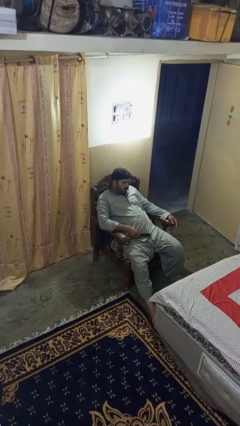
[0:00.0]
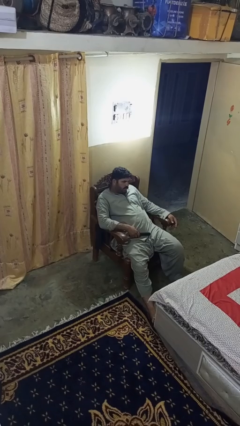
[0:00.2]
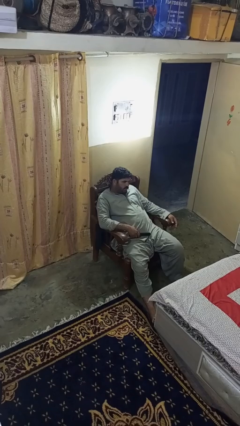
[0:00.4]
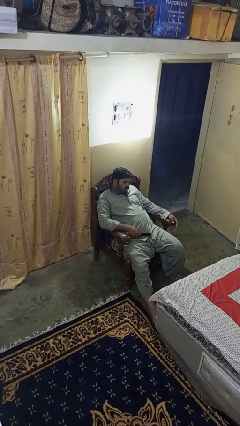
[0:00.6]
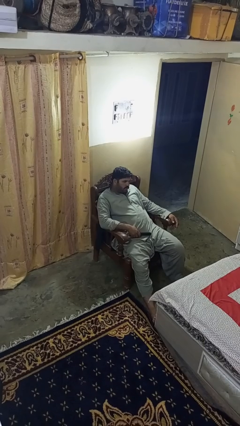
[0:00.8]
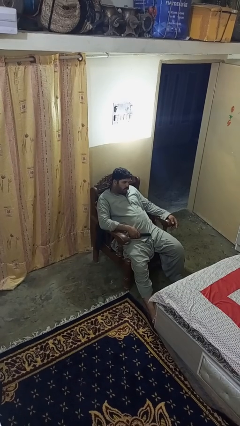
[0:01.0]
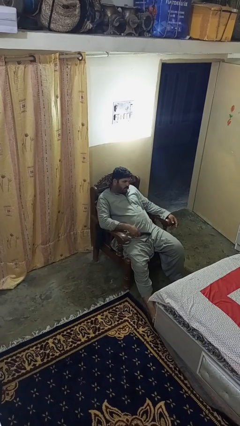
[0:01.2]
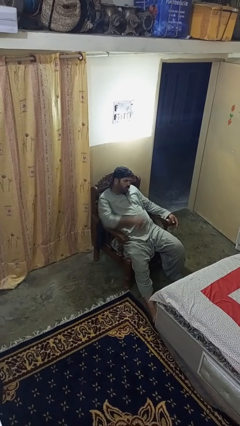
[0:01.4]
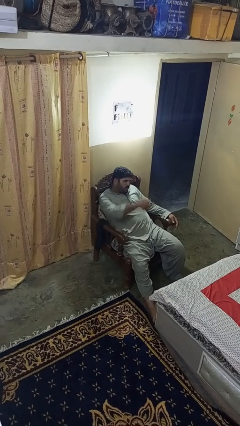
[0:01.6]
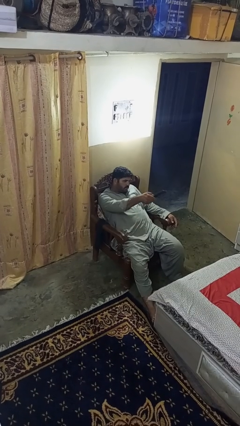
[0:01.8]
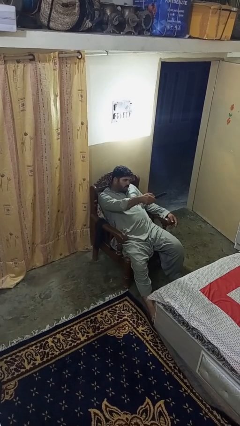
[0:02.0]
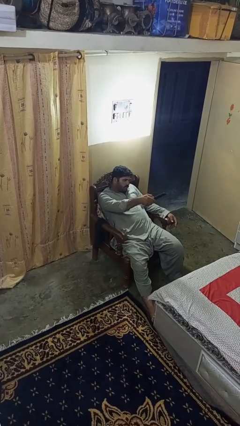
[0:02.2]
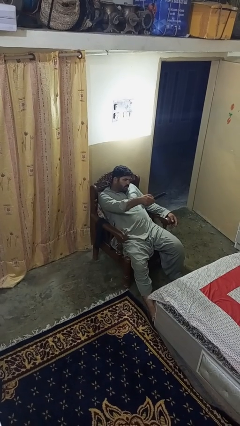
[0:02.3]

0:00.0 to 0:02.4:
person uses television remote

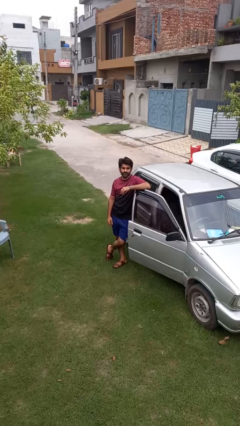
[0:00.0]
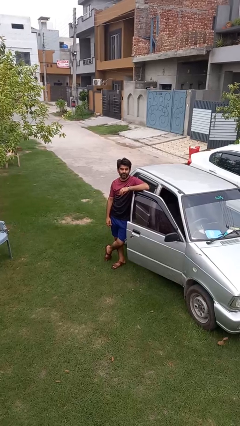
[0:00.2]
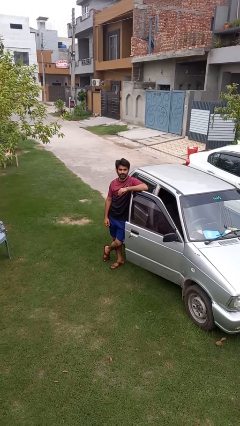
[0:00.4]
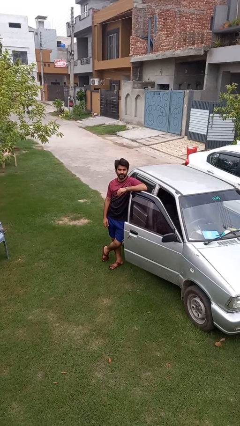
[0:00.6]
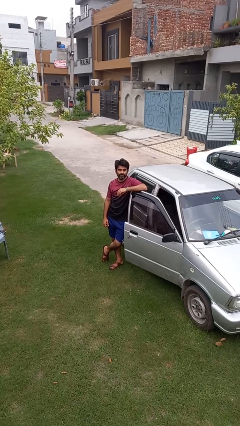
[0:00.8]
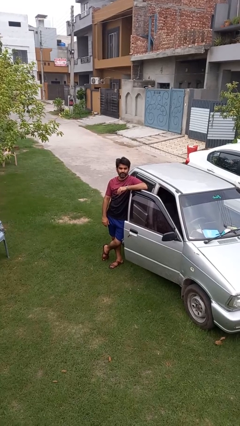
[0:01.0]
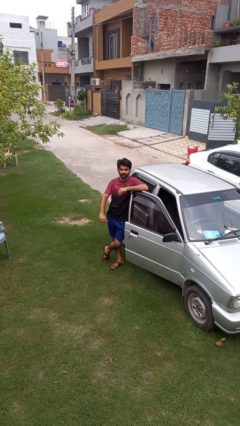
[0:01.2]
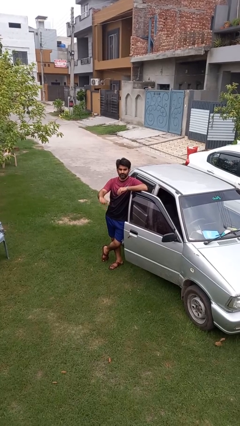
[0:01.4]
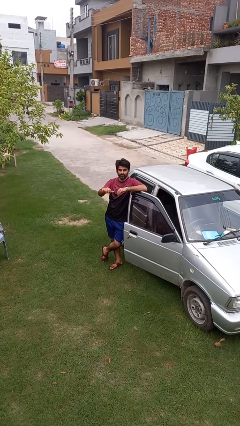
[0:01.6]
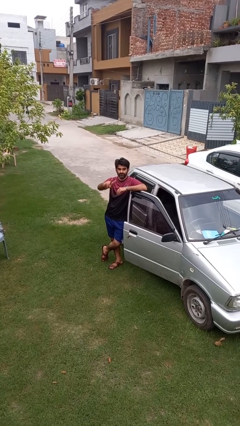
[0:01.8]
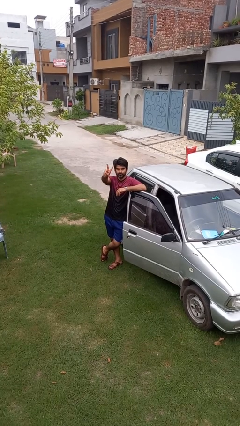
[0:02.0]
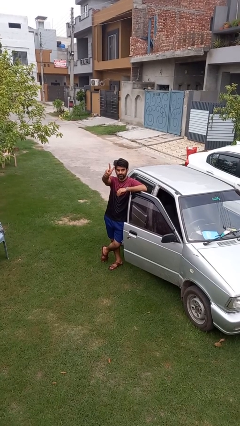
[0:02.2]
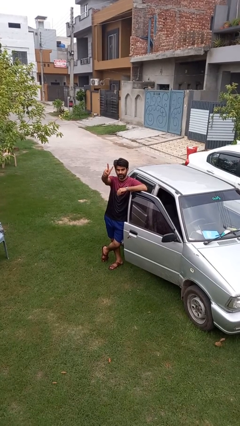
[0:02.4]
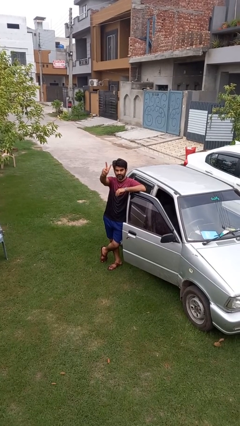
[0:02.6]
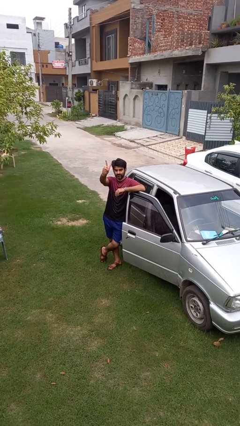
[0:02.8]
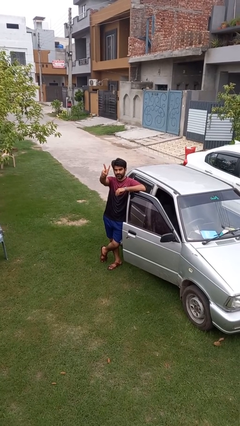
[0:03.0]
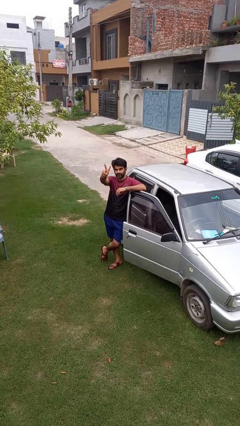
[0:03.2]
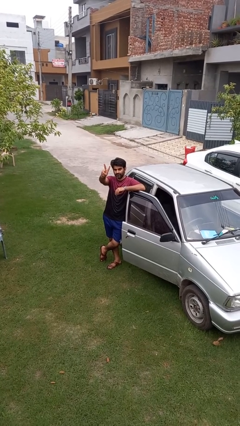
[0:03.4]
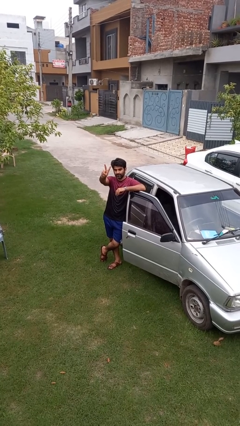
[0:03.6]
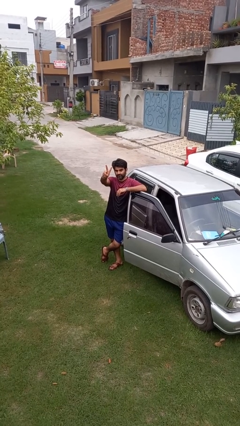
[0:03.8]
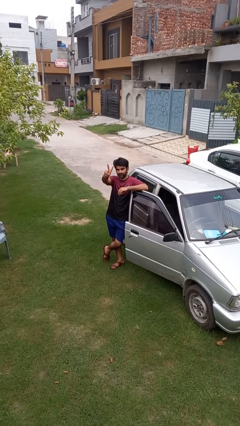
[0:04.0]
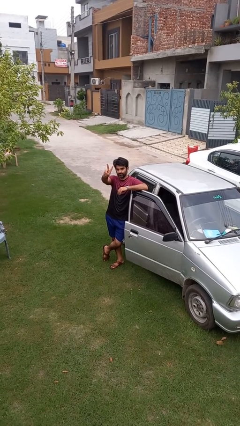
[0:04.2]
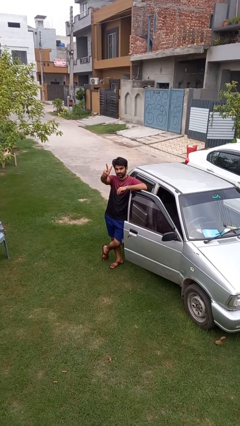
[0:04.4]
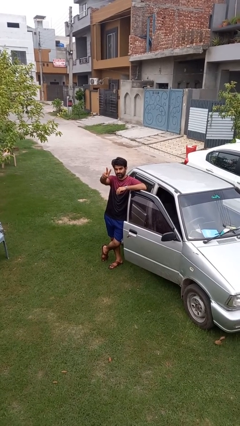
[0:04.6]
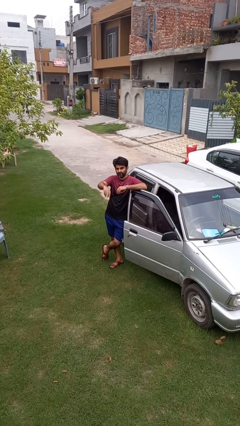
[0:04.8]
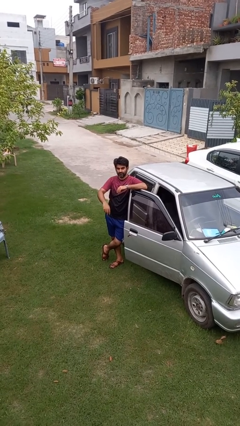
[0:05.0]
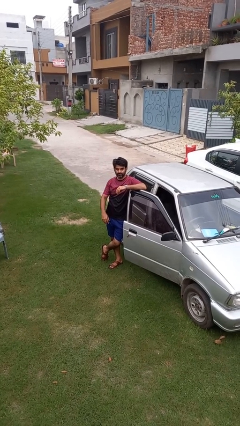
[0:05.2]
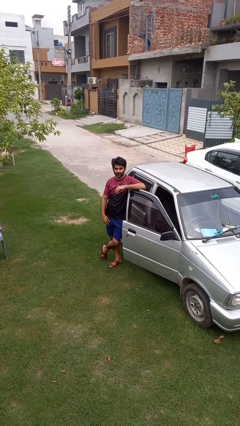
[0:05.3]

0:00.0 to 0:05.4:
person gestures peace

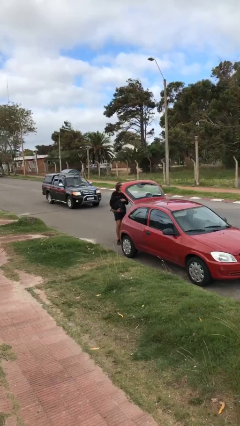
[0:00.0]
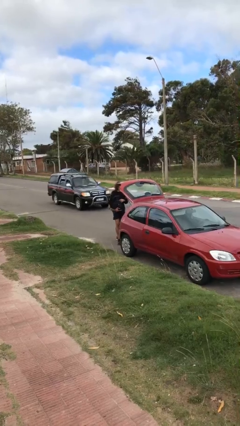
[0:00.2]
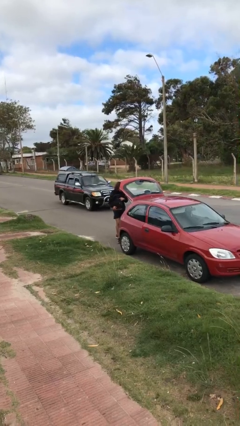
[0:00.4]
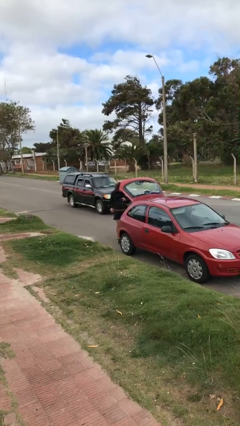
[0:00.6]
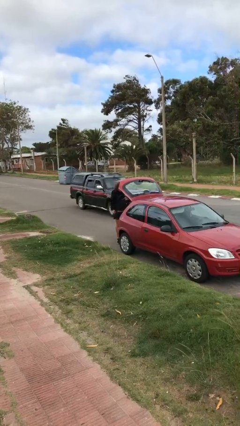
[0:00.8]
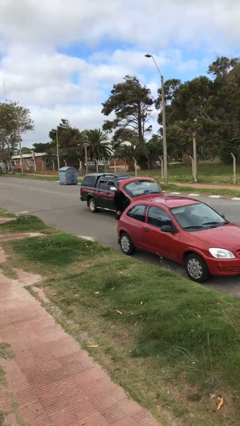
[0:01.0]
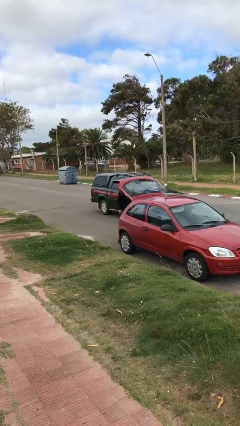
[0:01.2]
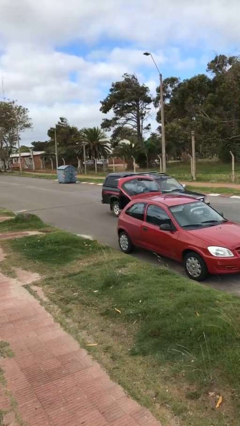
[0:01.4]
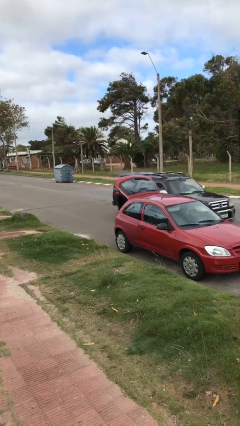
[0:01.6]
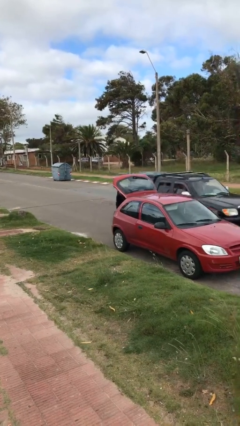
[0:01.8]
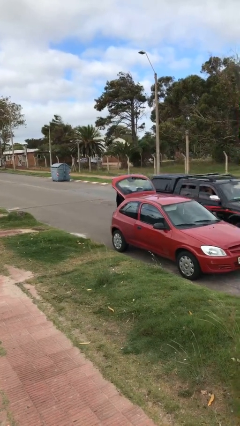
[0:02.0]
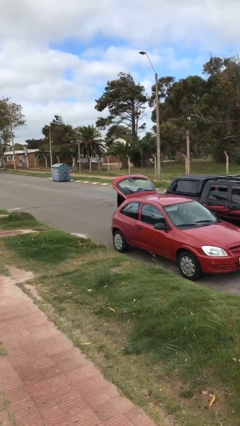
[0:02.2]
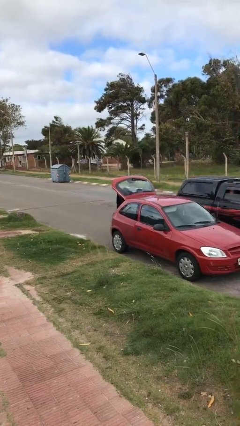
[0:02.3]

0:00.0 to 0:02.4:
person loads car

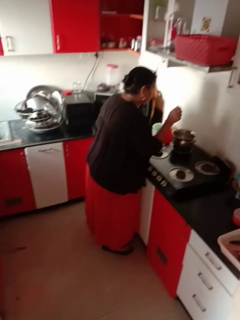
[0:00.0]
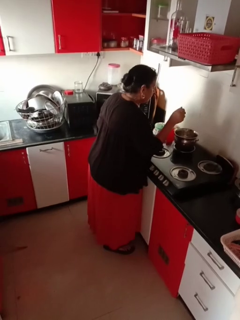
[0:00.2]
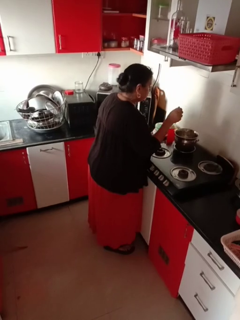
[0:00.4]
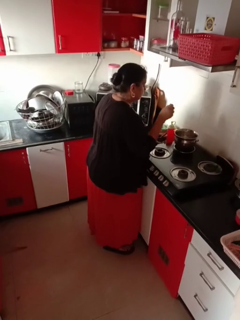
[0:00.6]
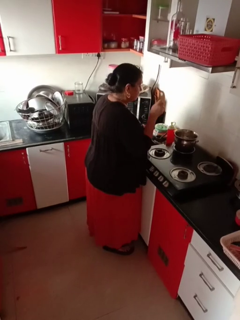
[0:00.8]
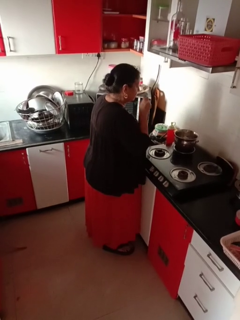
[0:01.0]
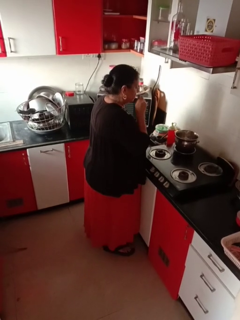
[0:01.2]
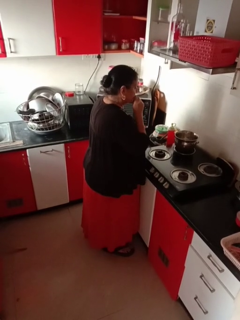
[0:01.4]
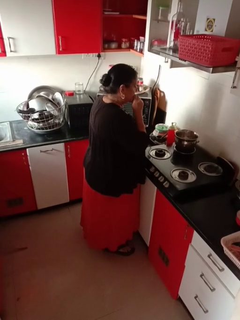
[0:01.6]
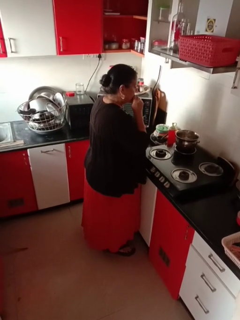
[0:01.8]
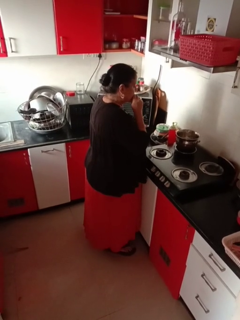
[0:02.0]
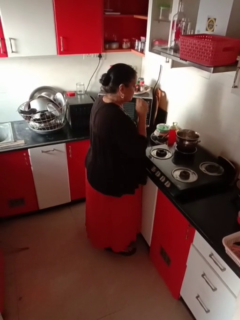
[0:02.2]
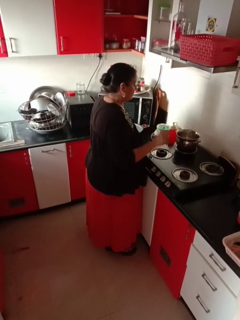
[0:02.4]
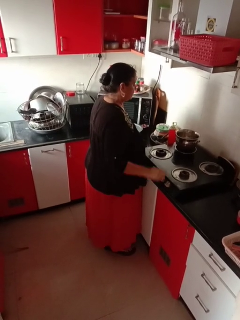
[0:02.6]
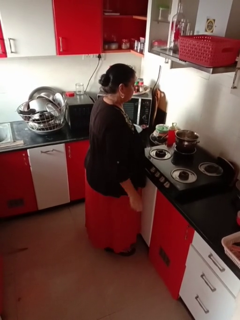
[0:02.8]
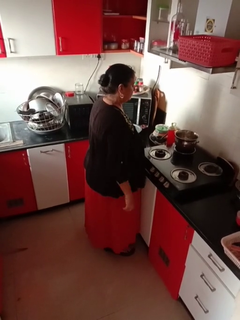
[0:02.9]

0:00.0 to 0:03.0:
person burns hand

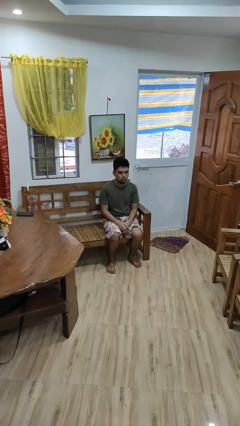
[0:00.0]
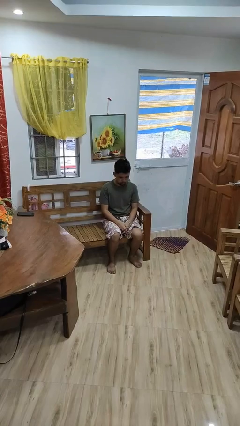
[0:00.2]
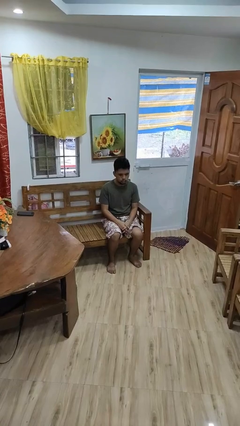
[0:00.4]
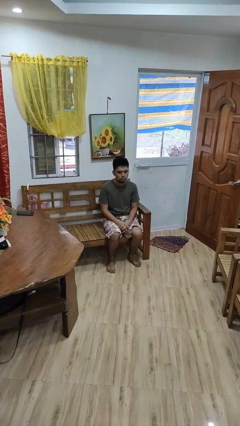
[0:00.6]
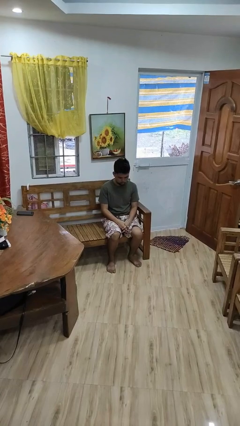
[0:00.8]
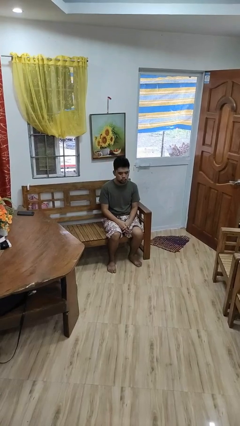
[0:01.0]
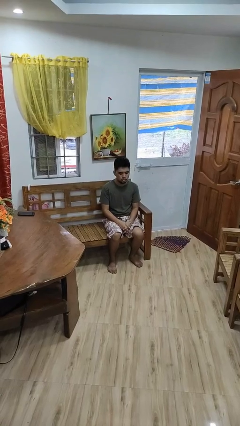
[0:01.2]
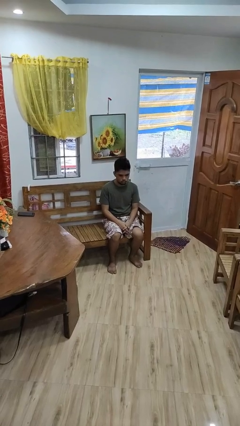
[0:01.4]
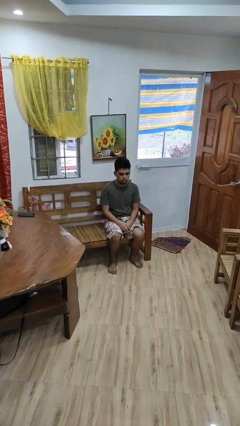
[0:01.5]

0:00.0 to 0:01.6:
person nods head

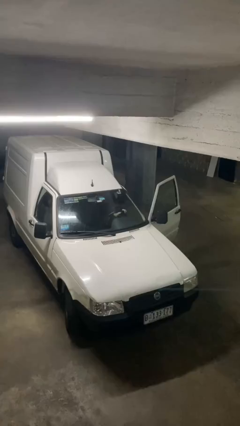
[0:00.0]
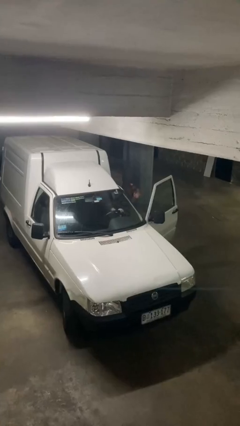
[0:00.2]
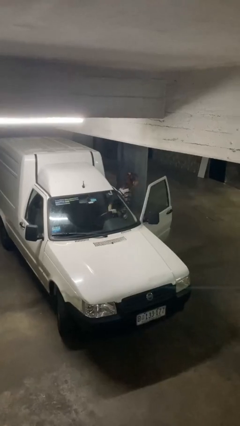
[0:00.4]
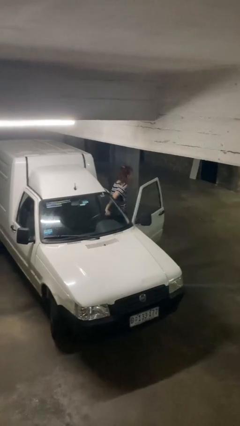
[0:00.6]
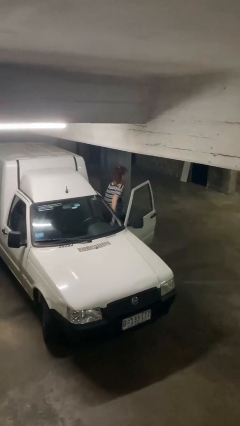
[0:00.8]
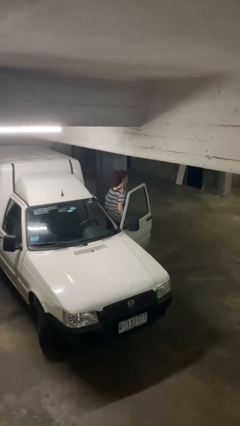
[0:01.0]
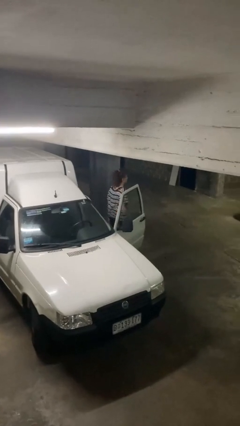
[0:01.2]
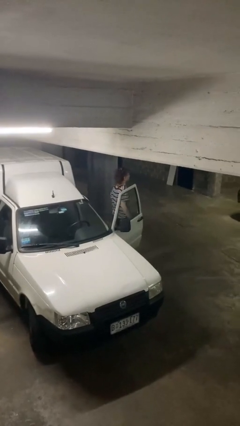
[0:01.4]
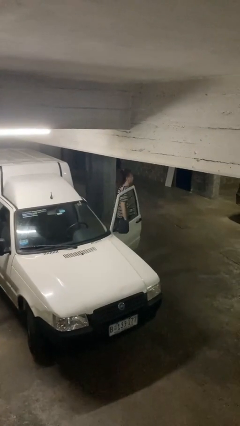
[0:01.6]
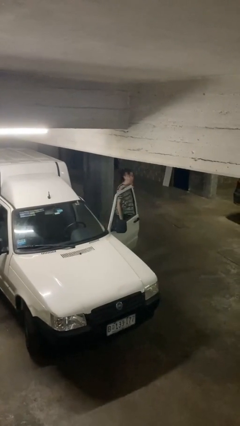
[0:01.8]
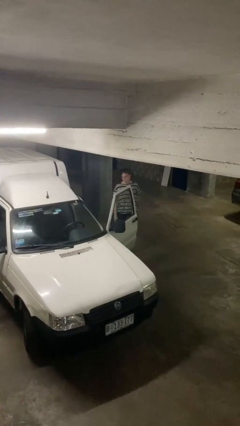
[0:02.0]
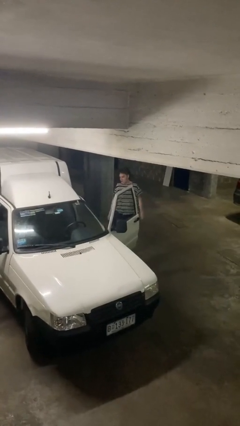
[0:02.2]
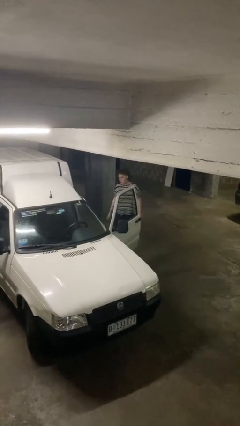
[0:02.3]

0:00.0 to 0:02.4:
person exits car

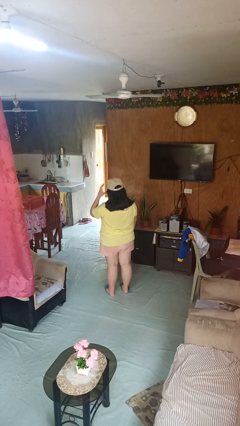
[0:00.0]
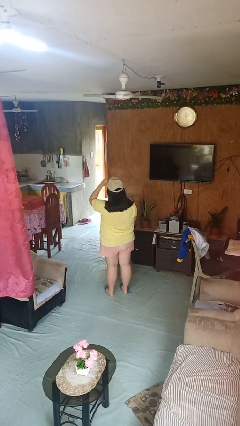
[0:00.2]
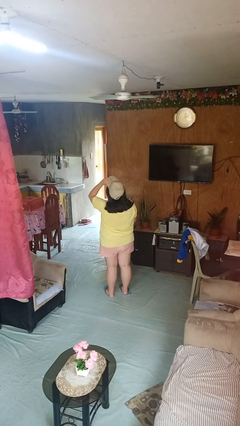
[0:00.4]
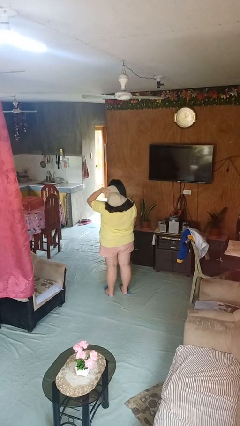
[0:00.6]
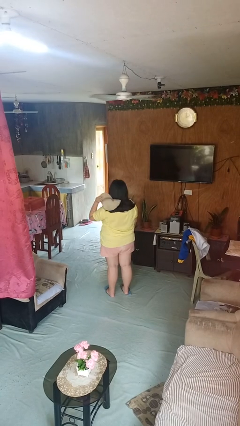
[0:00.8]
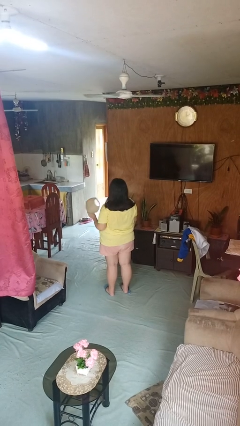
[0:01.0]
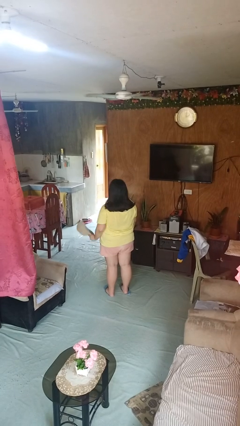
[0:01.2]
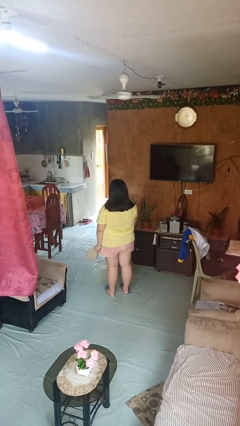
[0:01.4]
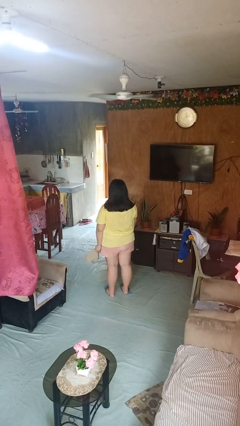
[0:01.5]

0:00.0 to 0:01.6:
person takes off hat
